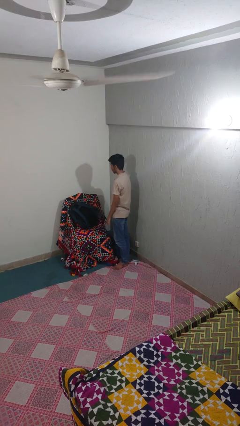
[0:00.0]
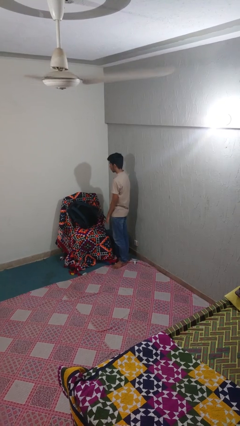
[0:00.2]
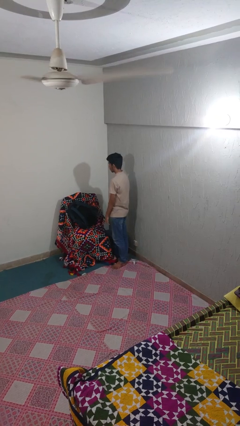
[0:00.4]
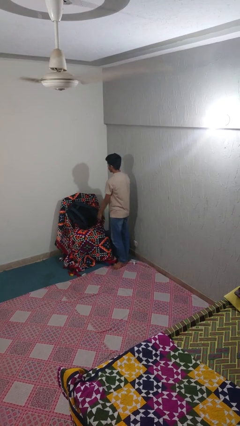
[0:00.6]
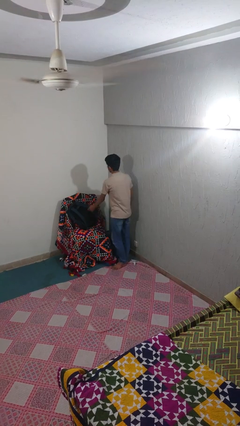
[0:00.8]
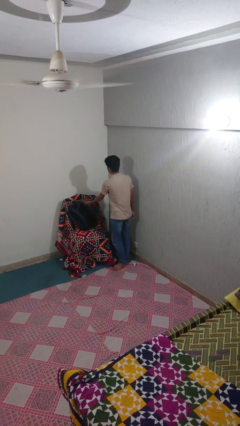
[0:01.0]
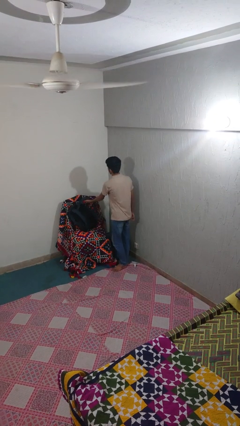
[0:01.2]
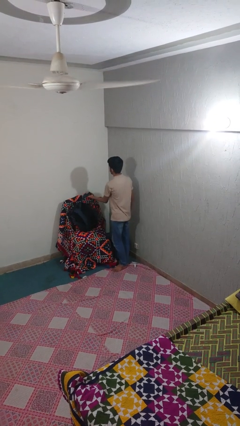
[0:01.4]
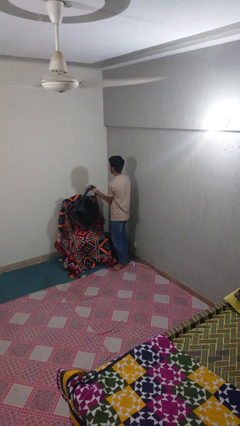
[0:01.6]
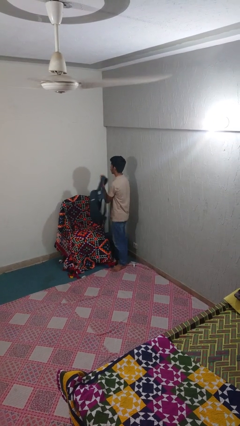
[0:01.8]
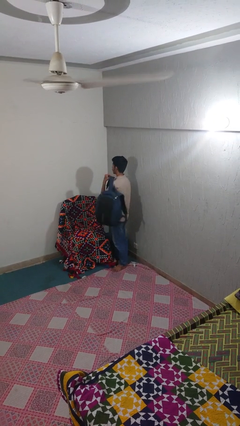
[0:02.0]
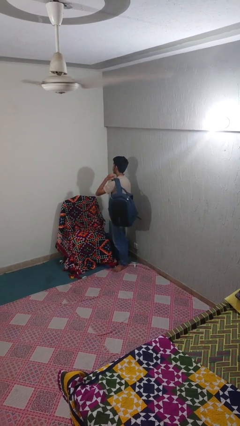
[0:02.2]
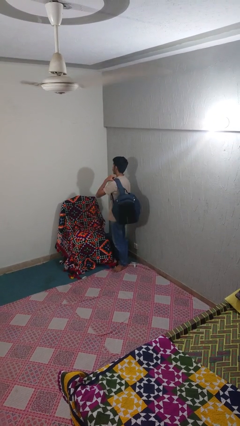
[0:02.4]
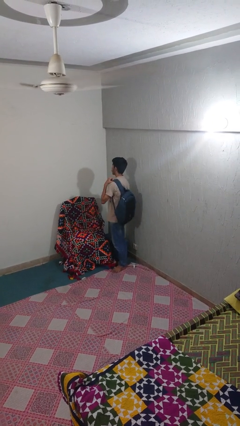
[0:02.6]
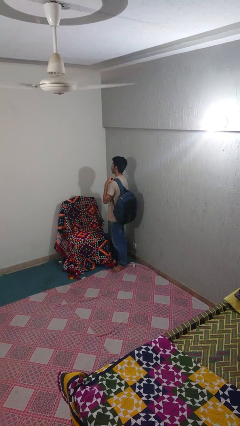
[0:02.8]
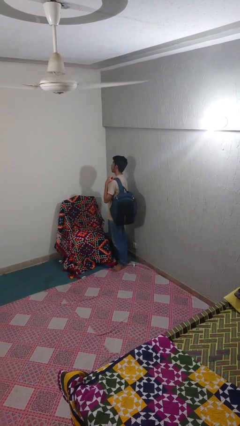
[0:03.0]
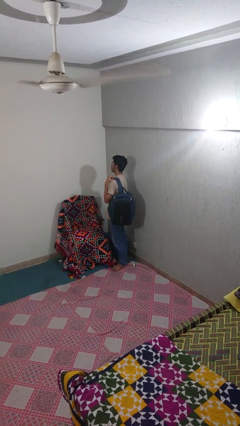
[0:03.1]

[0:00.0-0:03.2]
person picks up object from couch

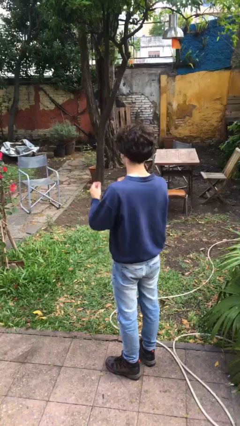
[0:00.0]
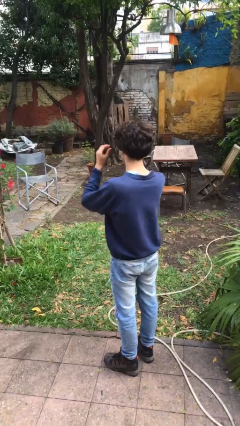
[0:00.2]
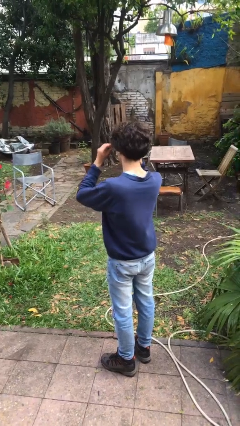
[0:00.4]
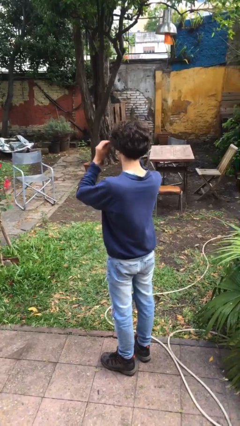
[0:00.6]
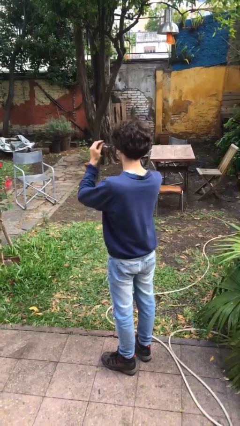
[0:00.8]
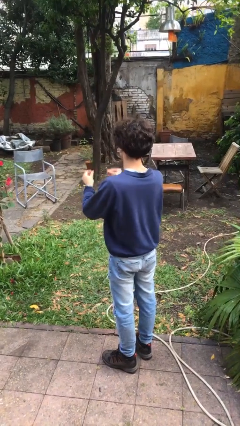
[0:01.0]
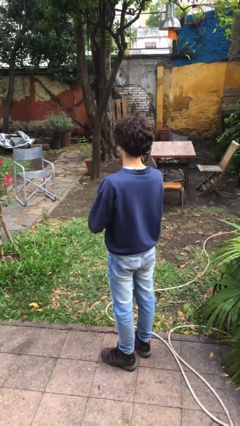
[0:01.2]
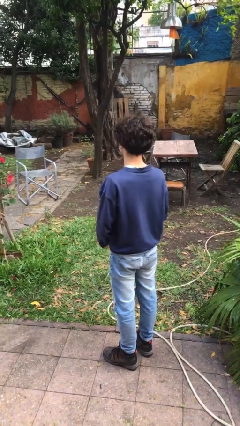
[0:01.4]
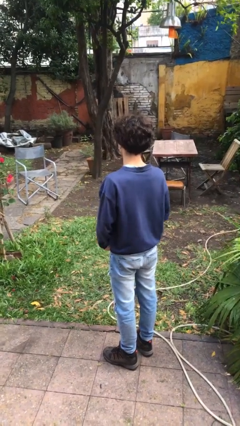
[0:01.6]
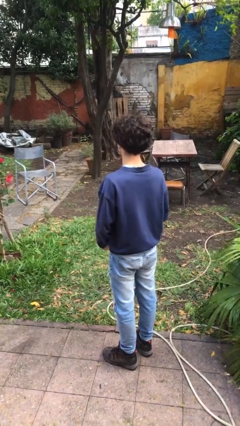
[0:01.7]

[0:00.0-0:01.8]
person takes off glasses

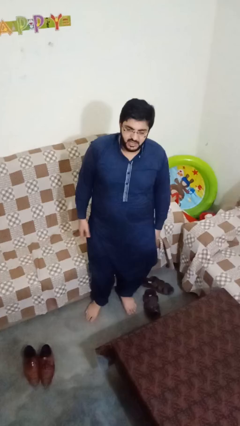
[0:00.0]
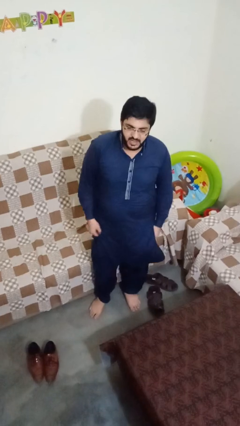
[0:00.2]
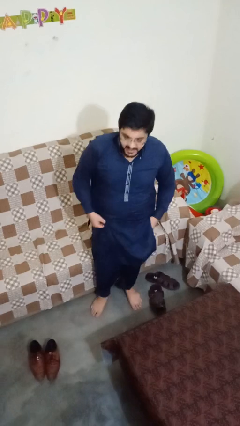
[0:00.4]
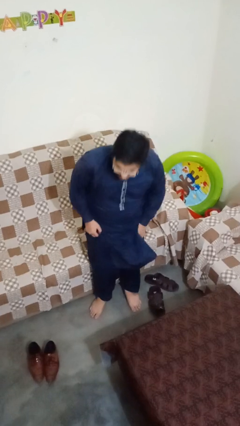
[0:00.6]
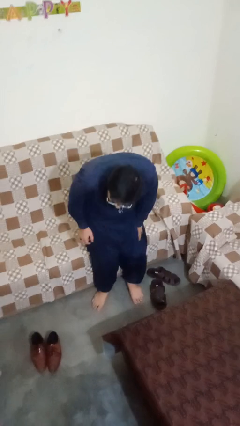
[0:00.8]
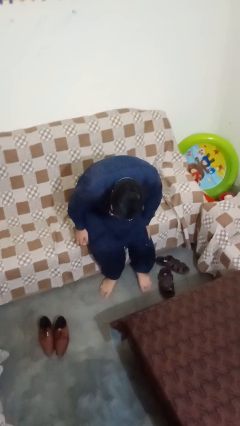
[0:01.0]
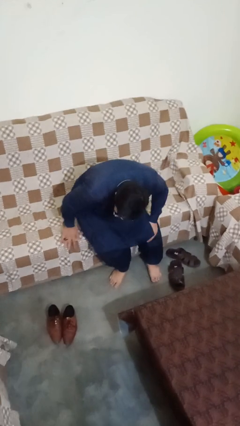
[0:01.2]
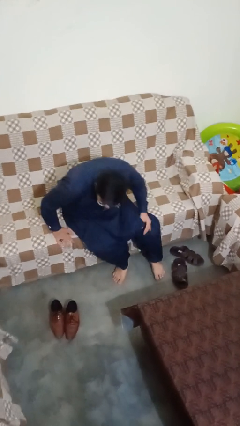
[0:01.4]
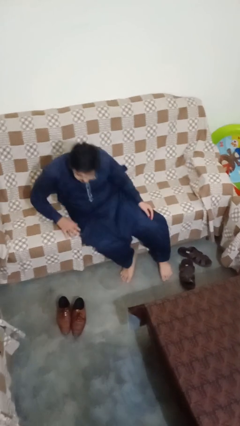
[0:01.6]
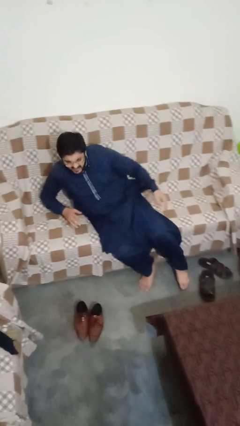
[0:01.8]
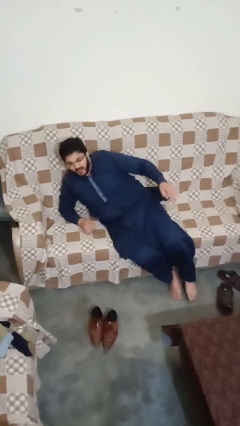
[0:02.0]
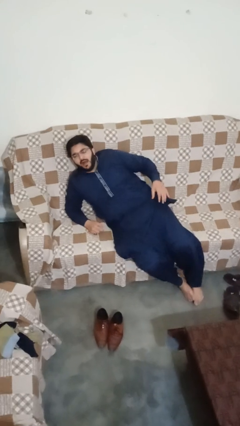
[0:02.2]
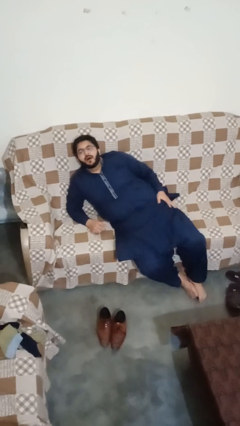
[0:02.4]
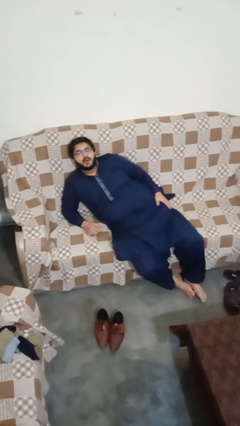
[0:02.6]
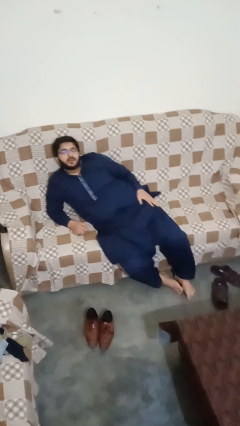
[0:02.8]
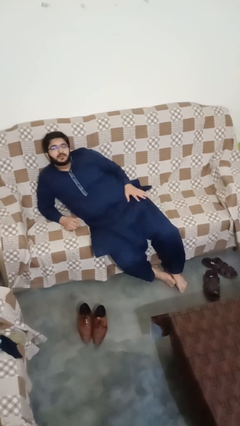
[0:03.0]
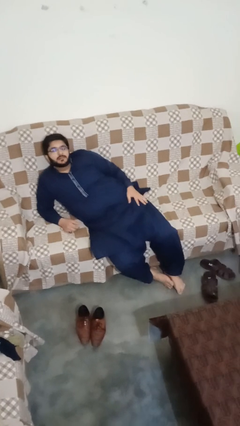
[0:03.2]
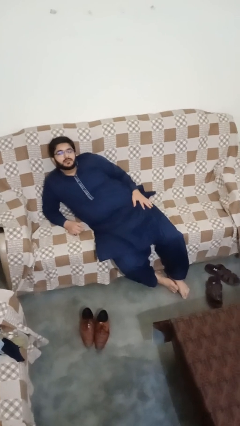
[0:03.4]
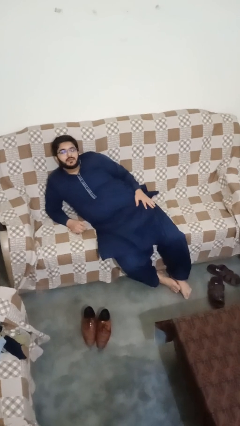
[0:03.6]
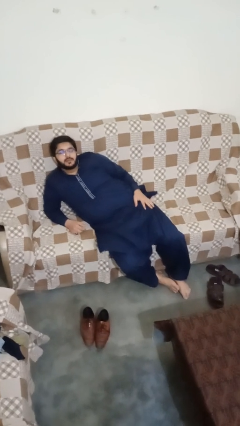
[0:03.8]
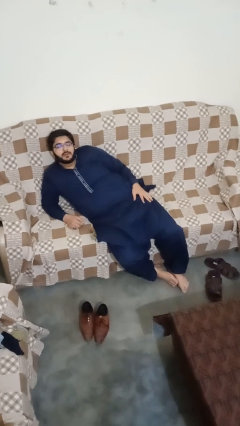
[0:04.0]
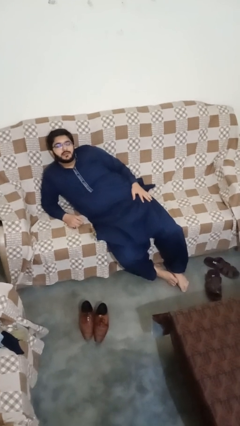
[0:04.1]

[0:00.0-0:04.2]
person lies down on couch

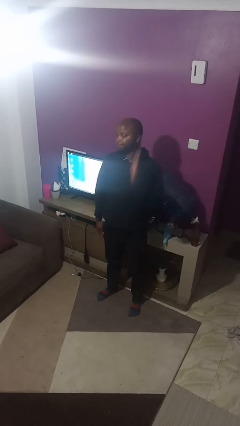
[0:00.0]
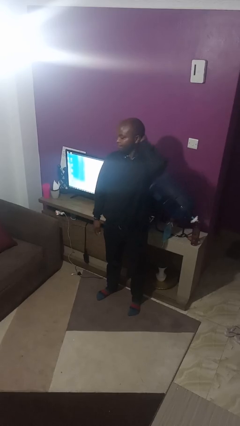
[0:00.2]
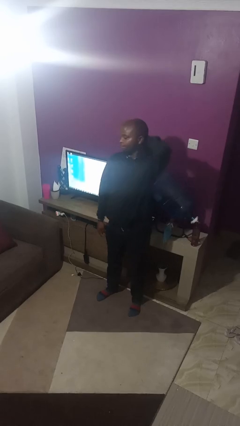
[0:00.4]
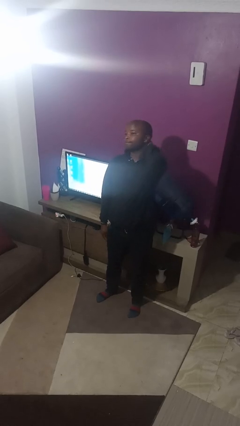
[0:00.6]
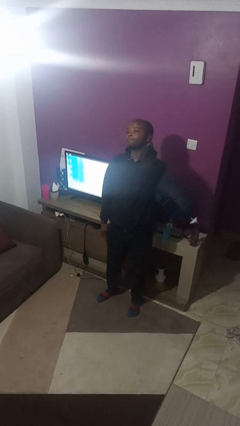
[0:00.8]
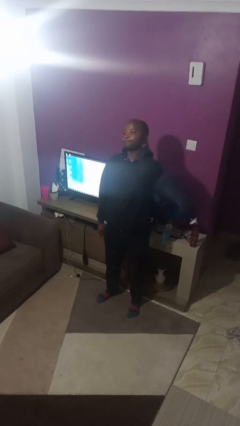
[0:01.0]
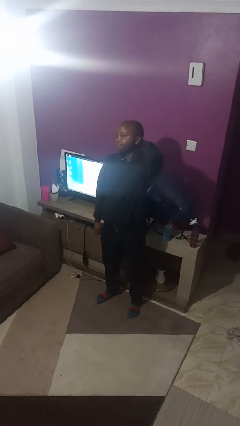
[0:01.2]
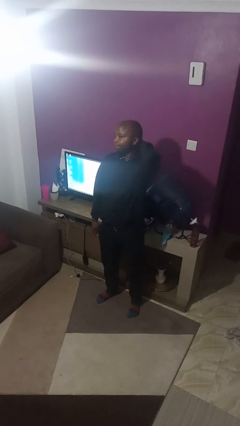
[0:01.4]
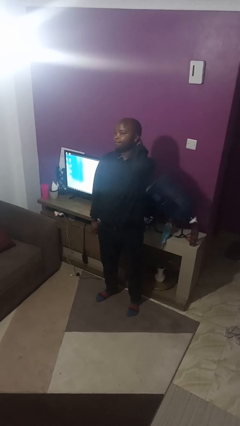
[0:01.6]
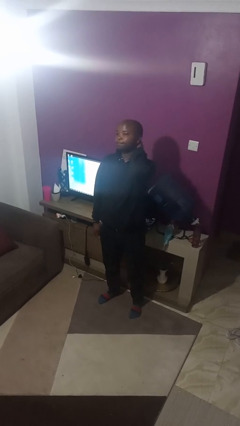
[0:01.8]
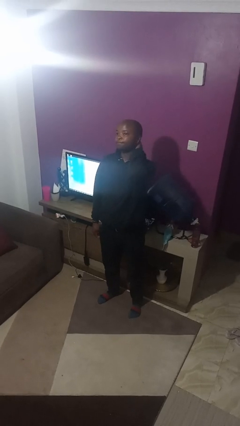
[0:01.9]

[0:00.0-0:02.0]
person rubs neck

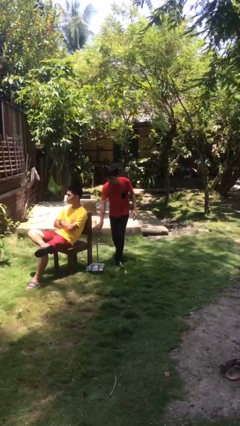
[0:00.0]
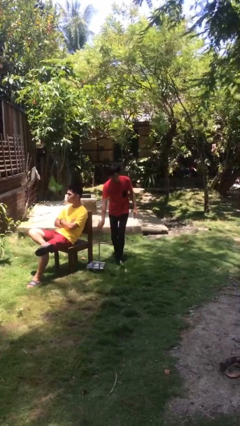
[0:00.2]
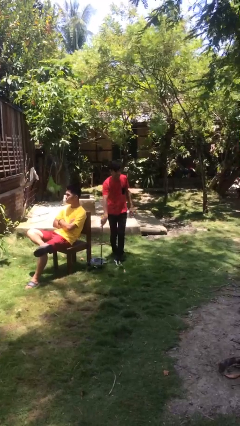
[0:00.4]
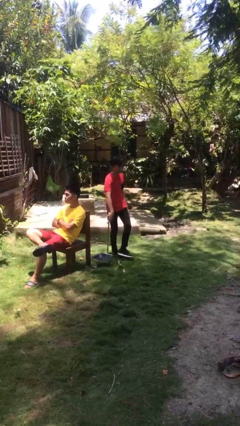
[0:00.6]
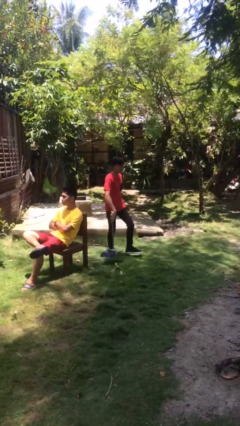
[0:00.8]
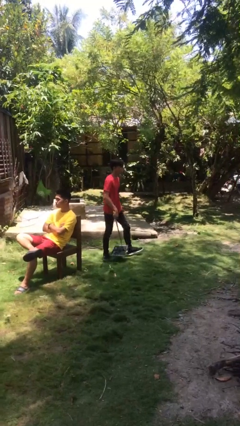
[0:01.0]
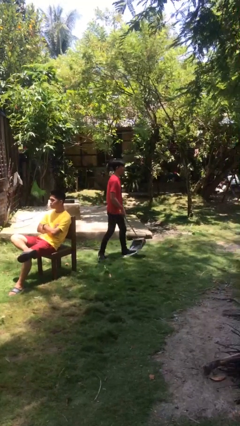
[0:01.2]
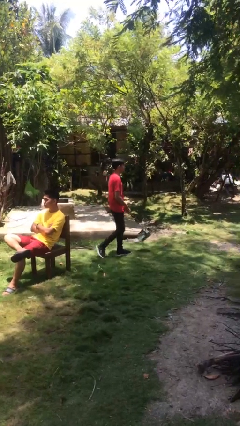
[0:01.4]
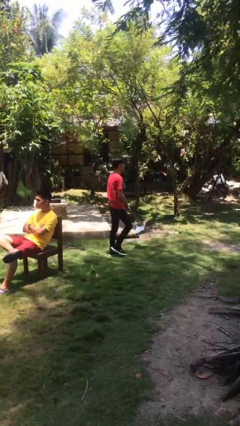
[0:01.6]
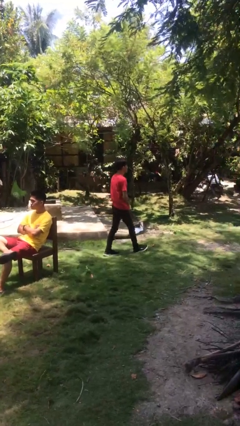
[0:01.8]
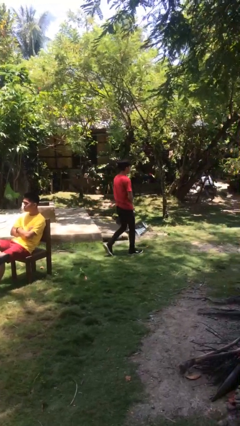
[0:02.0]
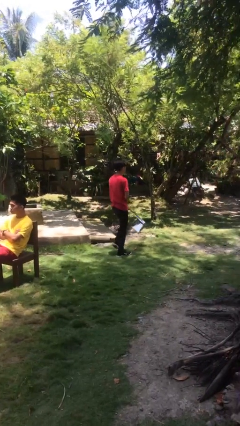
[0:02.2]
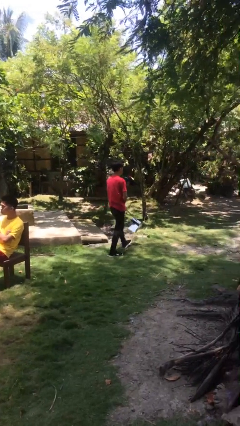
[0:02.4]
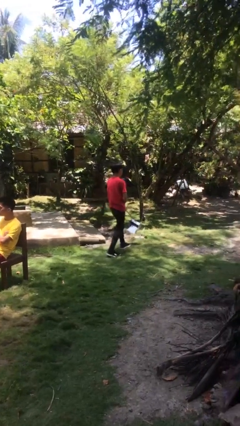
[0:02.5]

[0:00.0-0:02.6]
person steals object from person

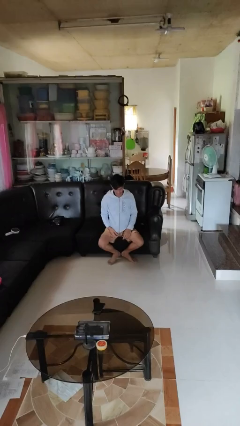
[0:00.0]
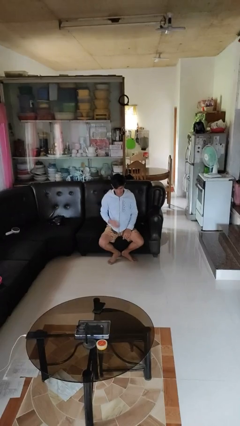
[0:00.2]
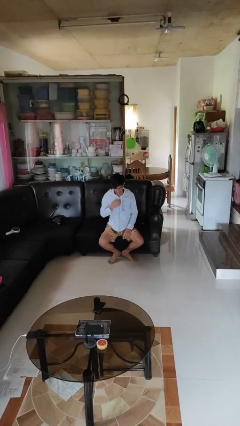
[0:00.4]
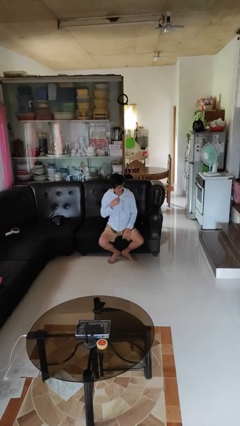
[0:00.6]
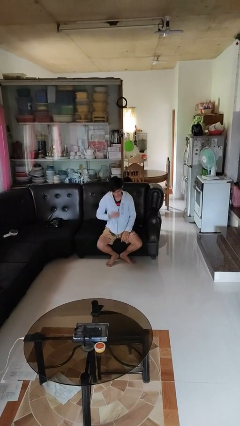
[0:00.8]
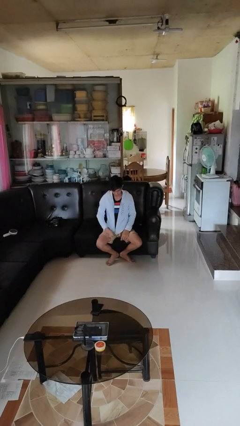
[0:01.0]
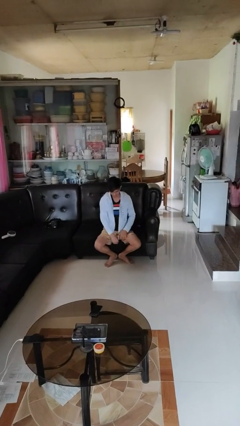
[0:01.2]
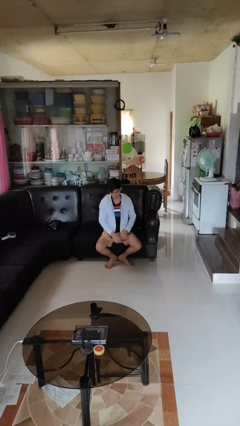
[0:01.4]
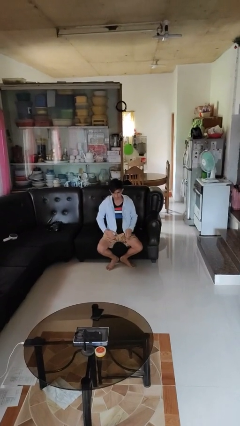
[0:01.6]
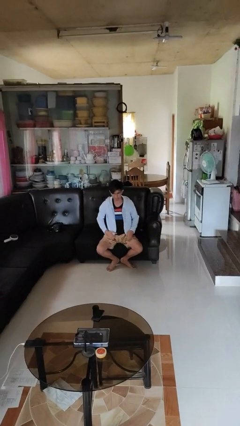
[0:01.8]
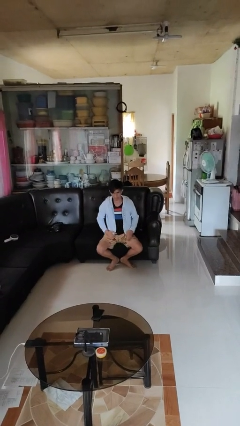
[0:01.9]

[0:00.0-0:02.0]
person unzips jacket

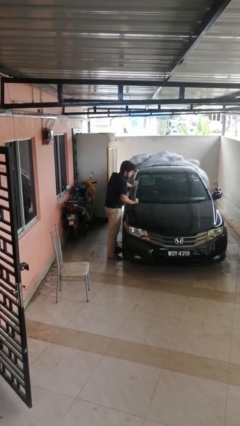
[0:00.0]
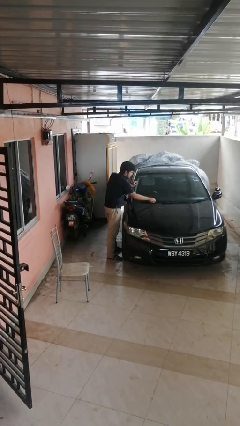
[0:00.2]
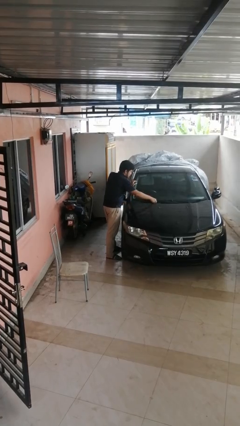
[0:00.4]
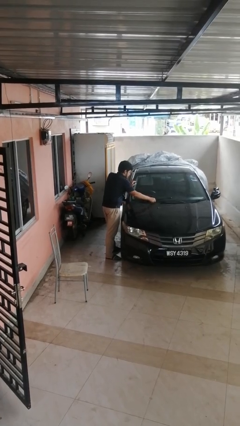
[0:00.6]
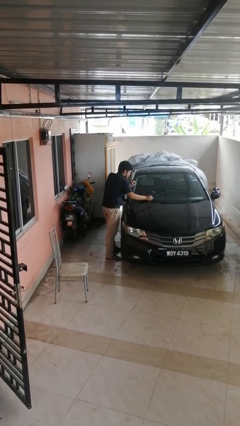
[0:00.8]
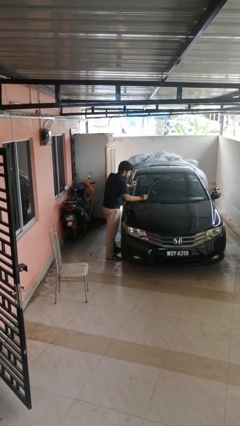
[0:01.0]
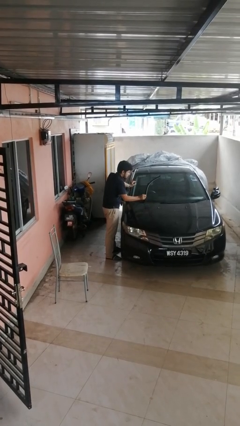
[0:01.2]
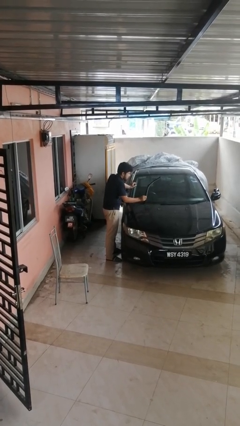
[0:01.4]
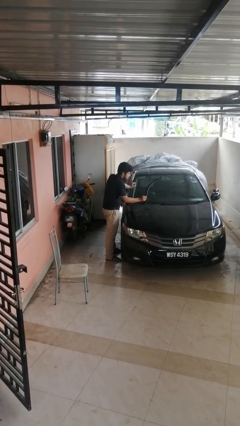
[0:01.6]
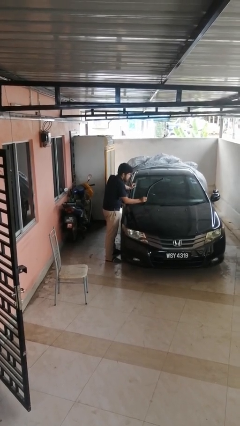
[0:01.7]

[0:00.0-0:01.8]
person flips up car wipers
